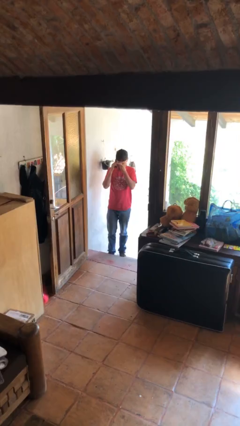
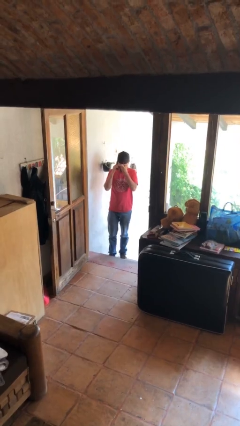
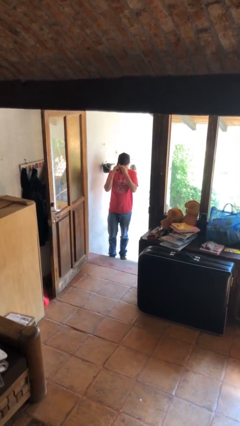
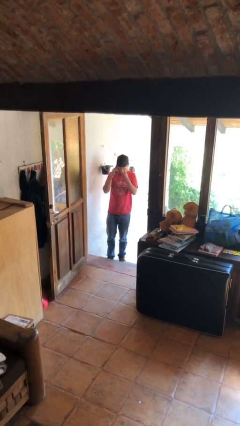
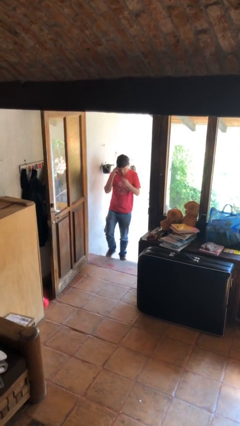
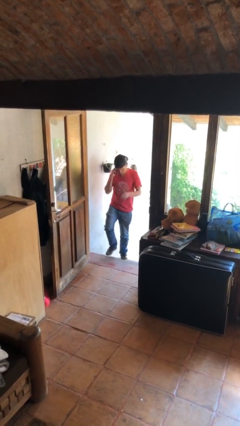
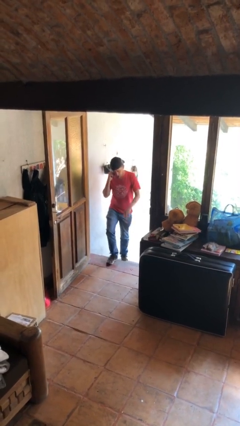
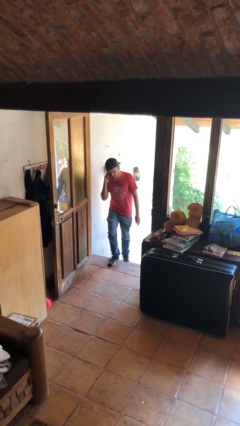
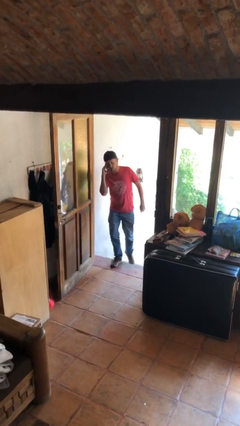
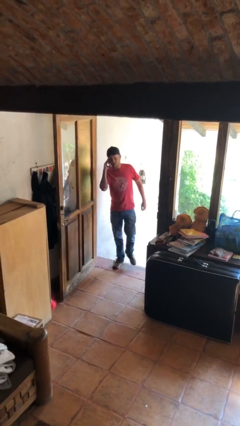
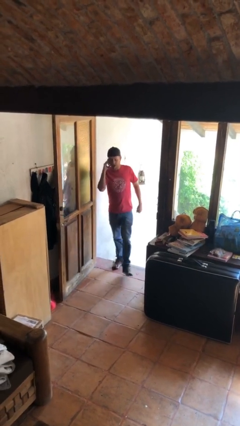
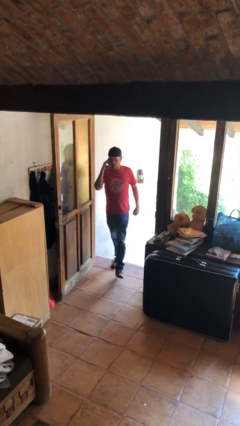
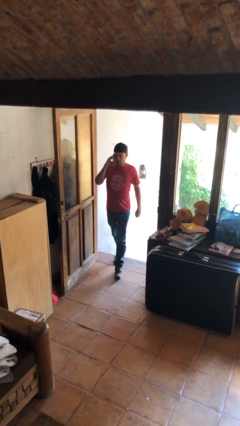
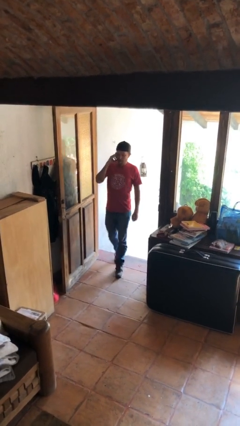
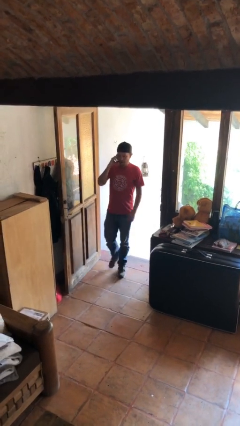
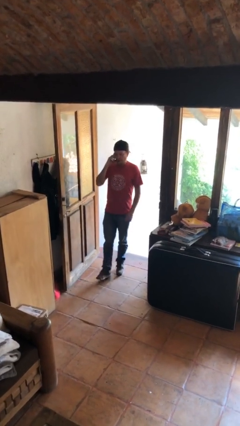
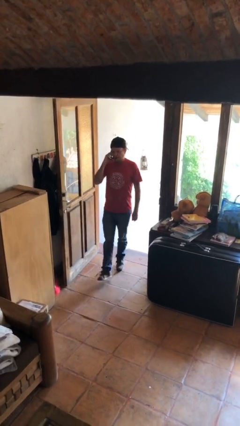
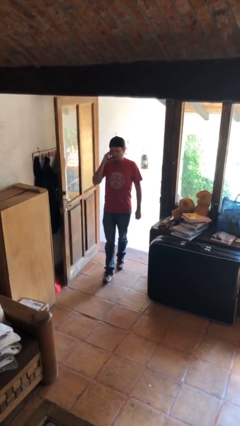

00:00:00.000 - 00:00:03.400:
person enters scene through structure

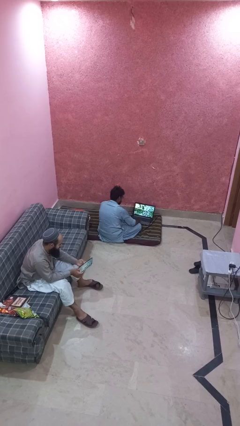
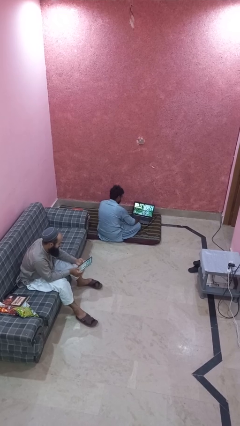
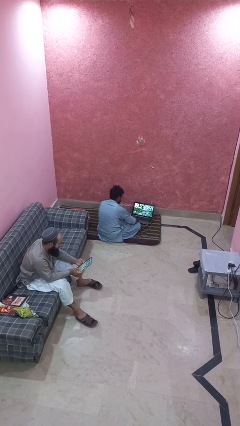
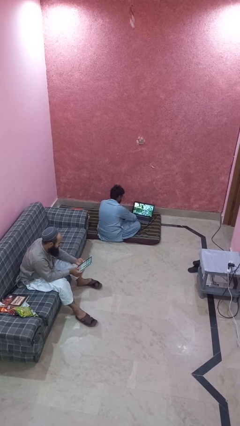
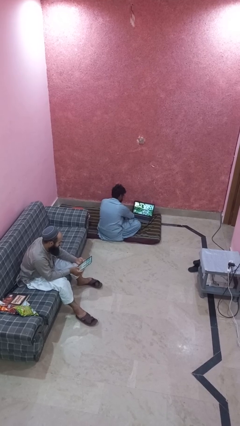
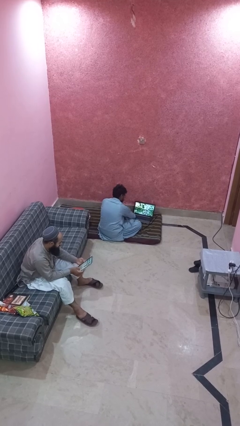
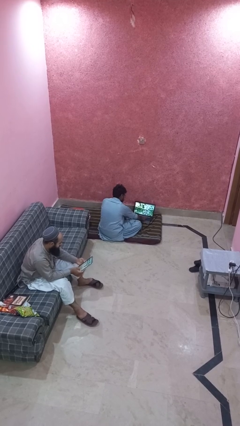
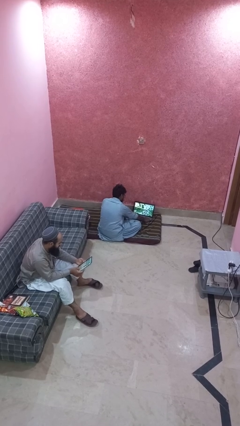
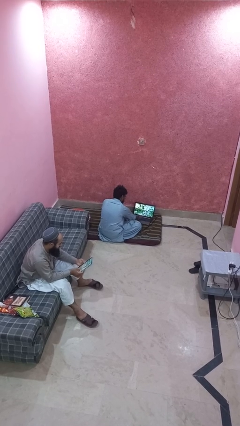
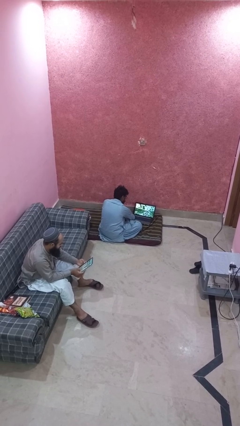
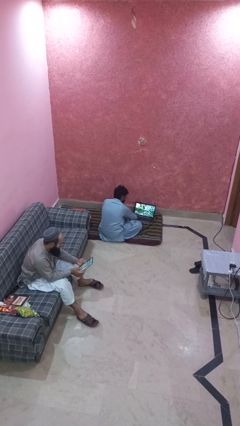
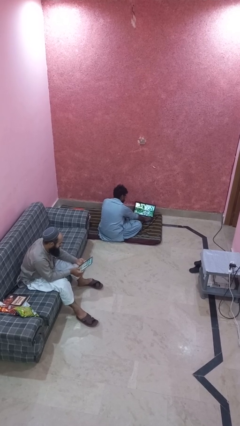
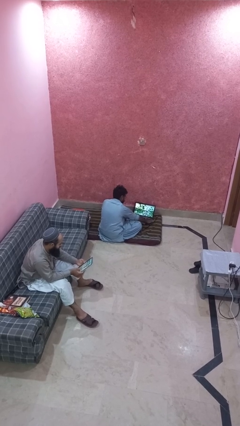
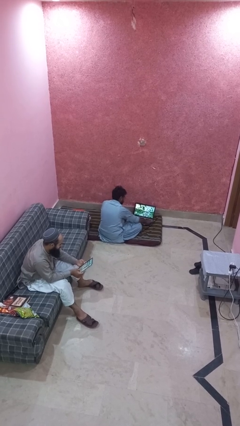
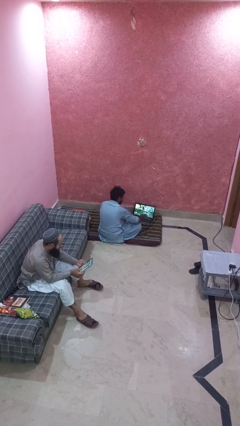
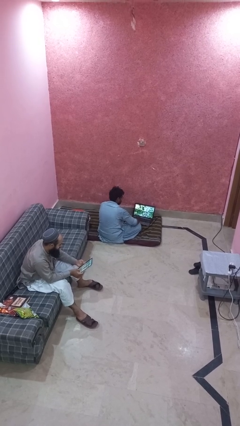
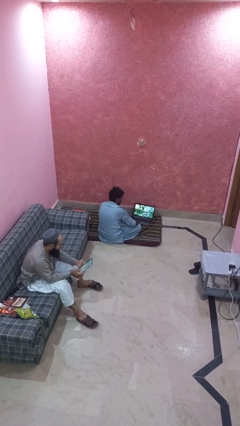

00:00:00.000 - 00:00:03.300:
person waves hand over object

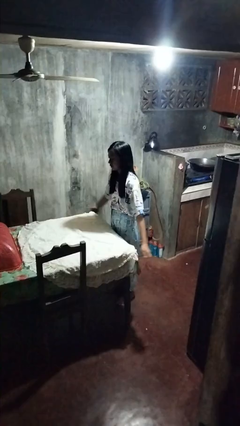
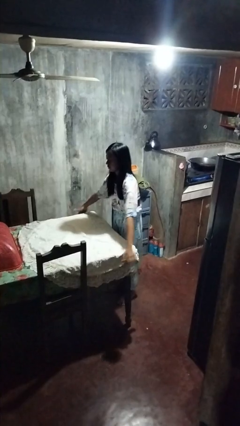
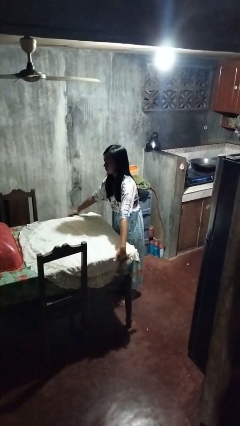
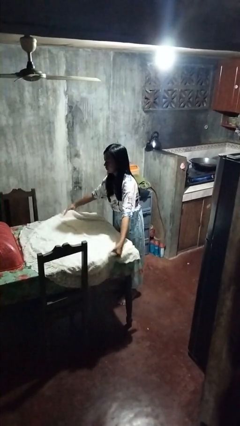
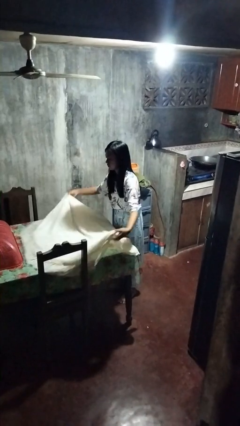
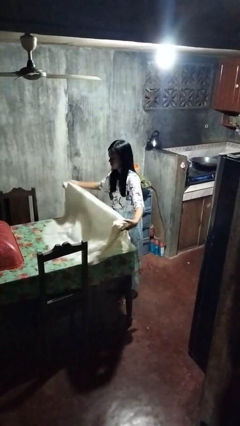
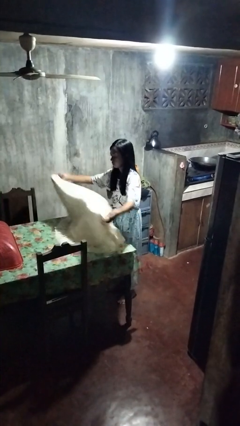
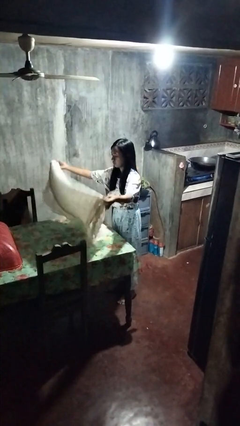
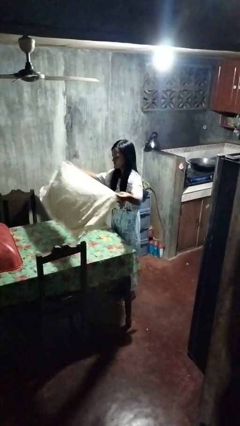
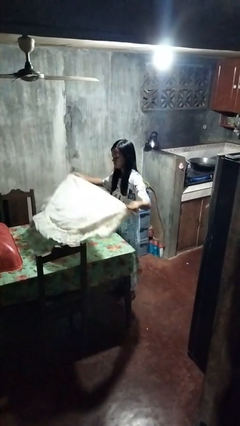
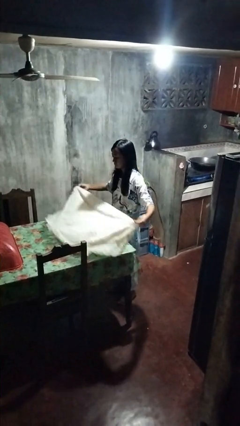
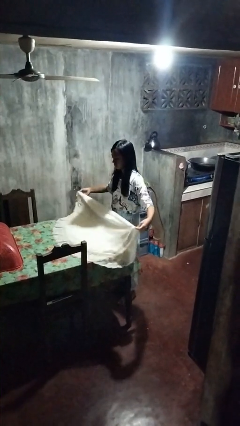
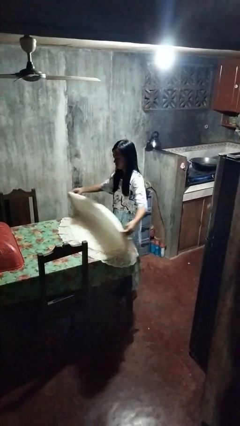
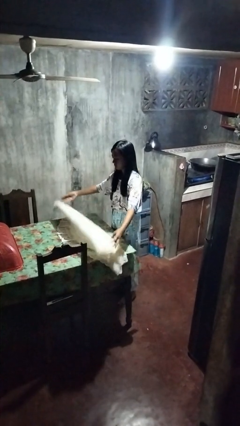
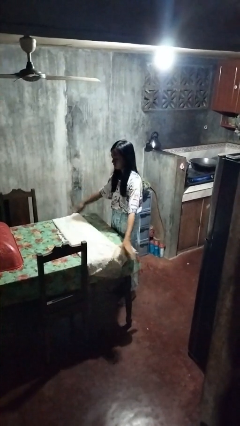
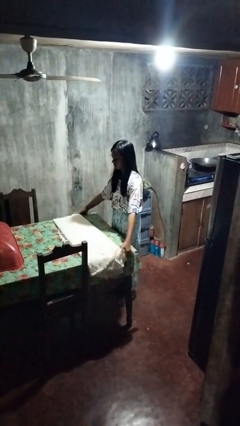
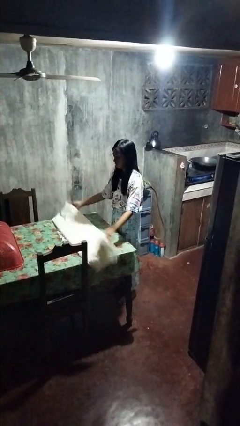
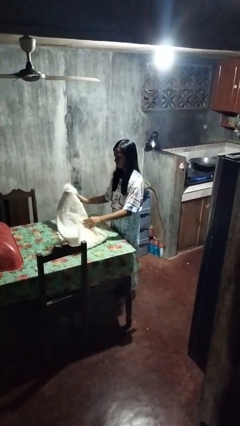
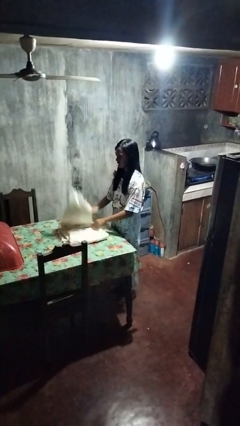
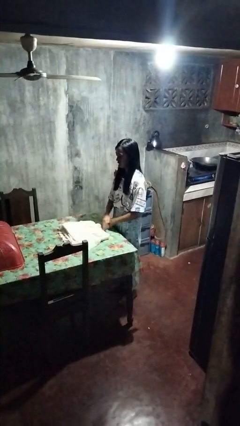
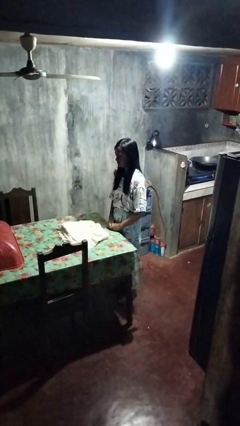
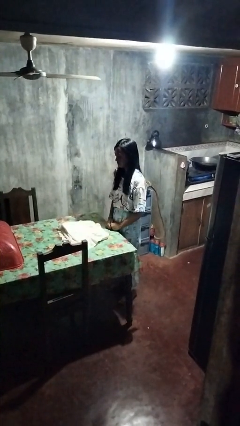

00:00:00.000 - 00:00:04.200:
person folds tablecloth

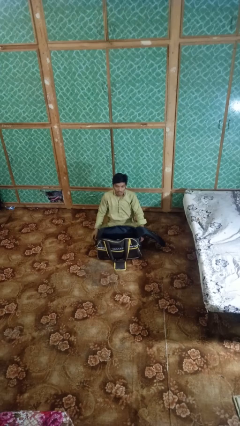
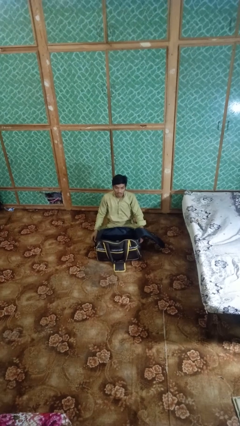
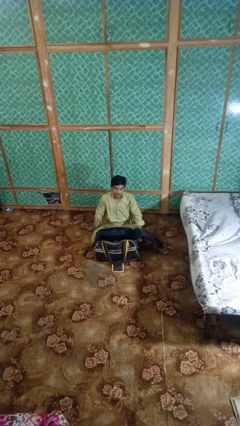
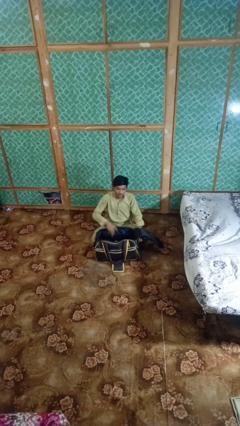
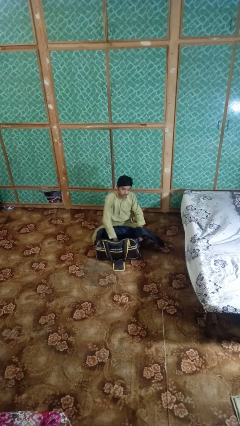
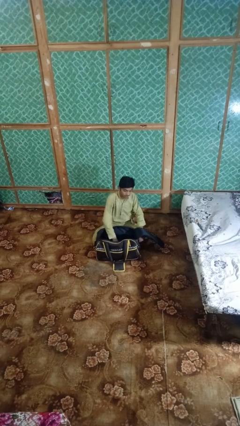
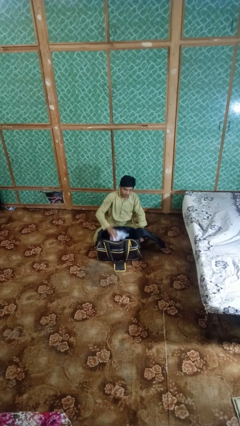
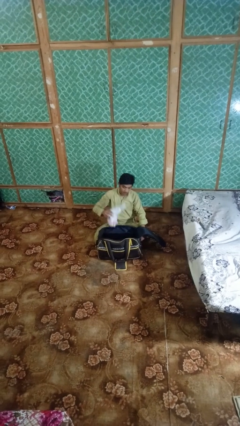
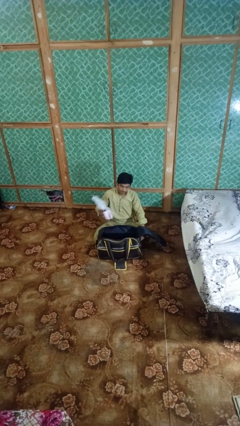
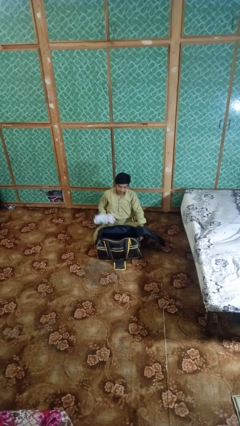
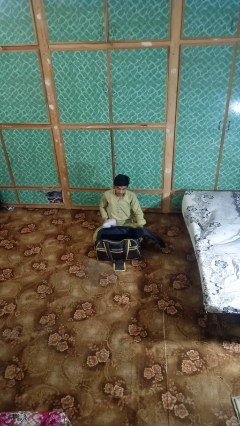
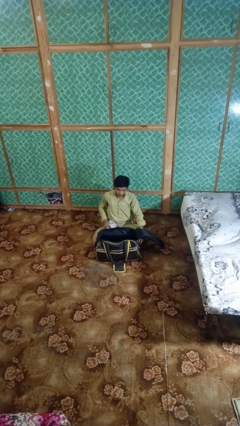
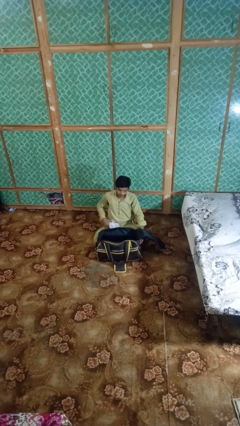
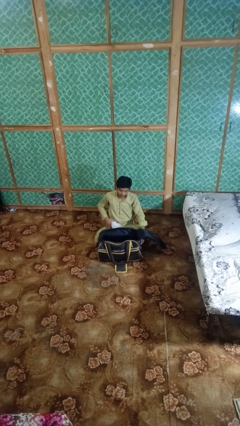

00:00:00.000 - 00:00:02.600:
person takes object from bag

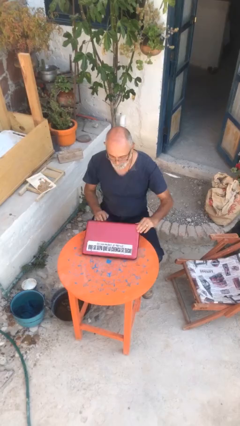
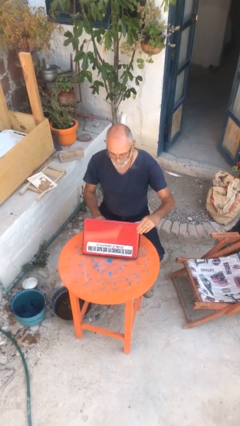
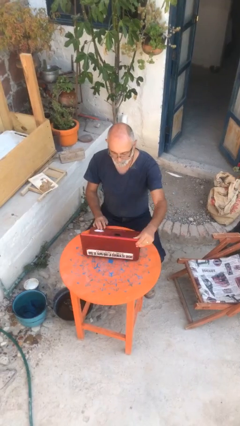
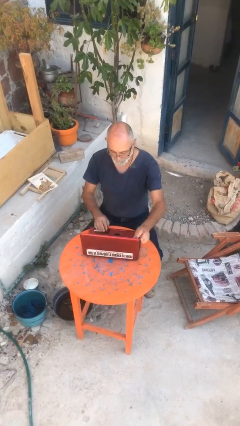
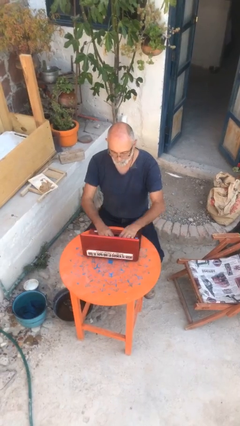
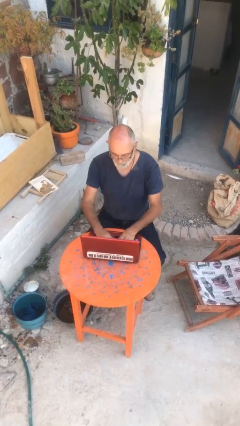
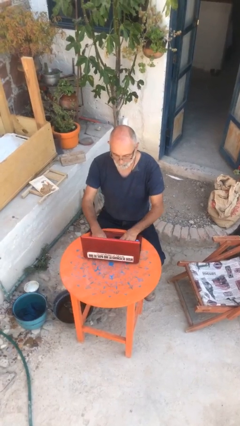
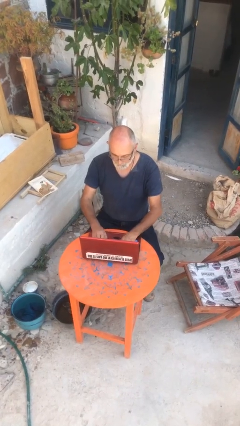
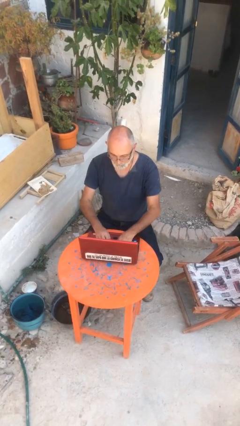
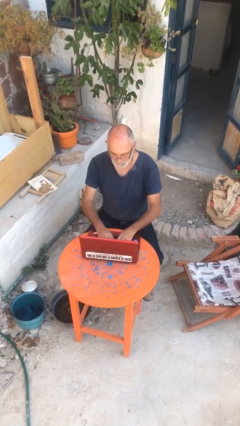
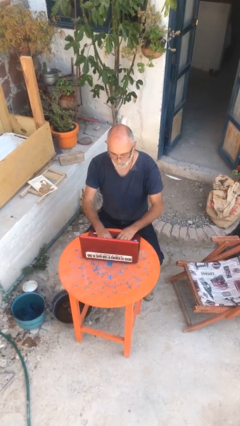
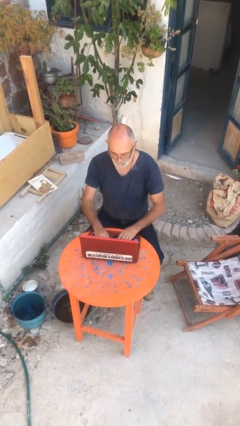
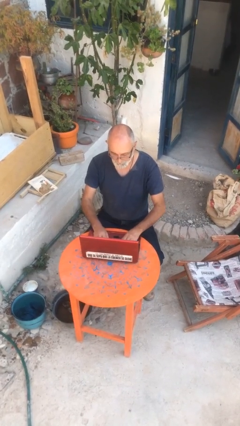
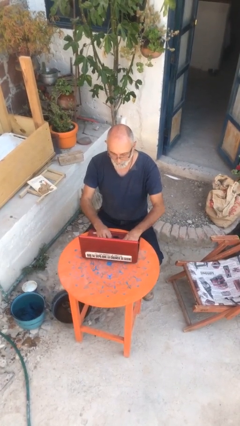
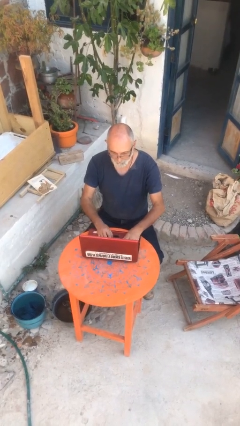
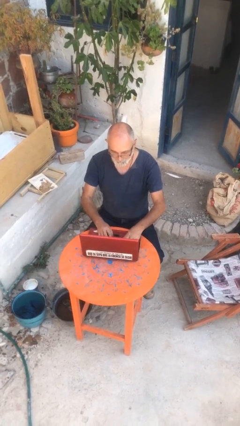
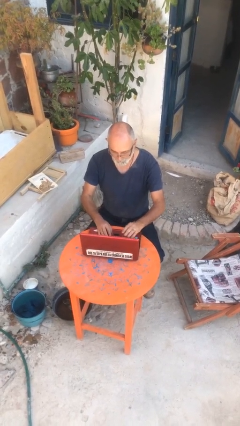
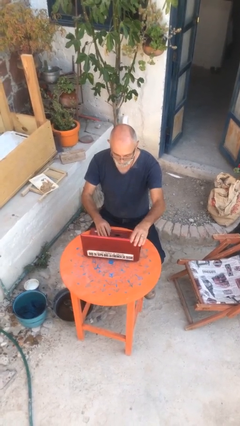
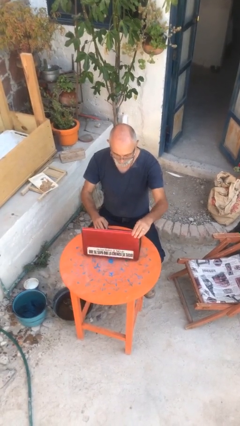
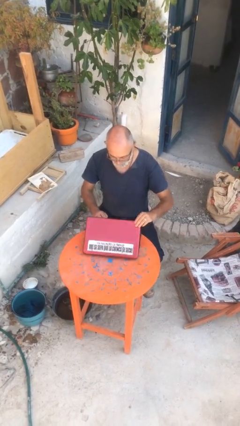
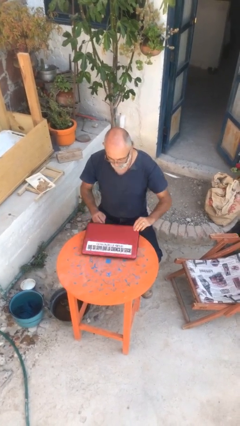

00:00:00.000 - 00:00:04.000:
person interacts with laptop

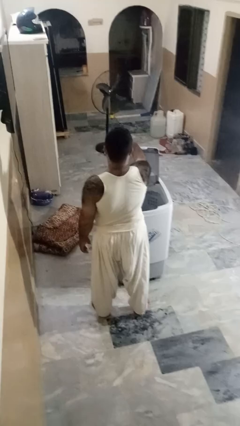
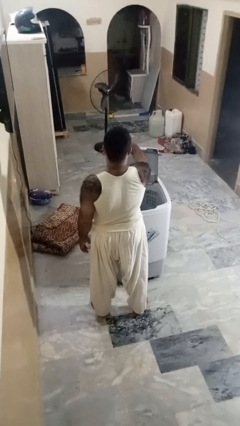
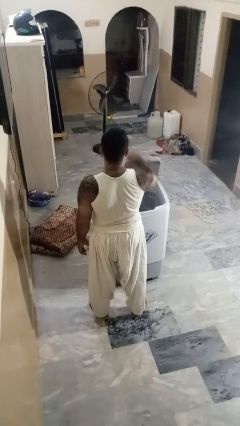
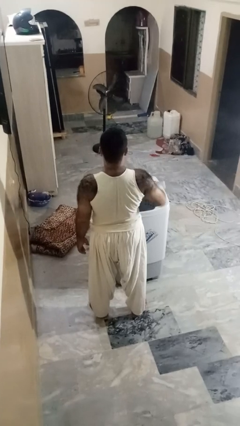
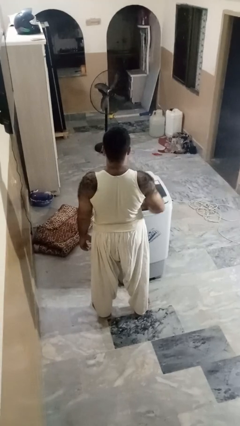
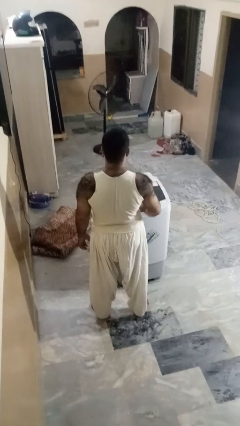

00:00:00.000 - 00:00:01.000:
person closes clothes washer
